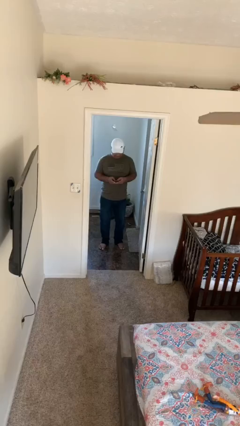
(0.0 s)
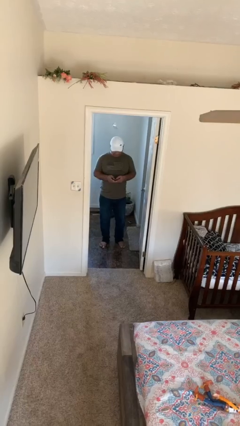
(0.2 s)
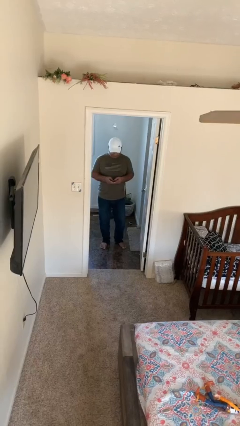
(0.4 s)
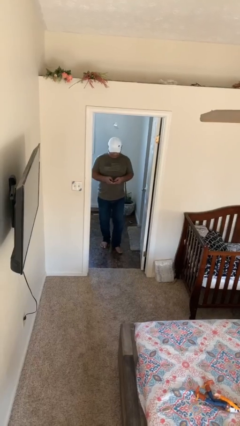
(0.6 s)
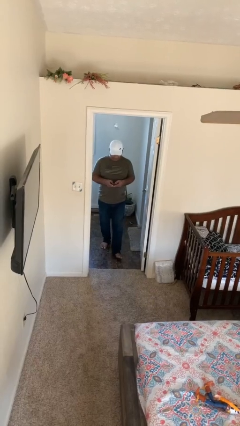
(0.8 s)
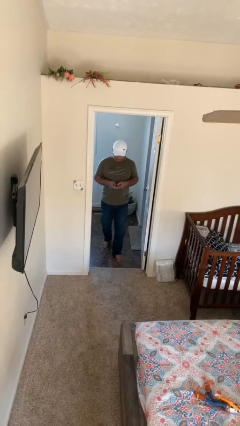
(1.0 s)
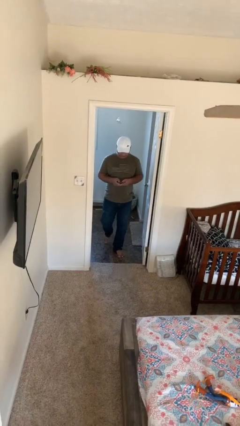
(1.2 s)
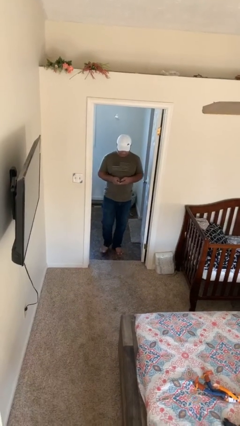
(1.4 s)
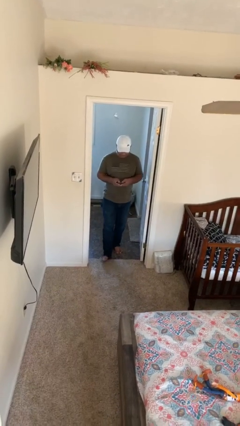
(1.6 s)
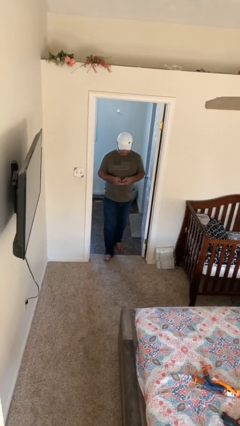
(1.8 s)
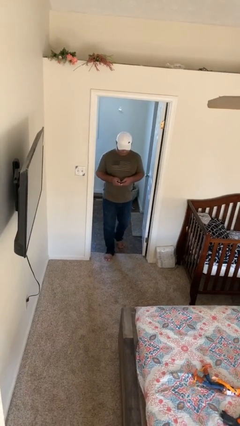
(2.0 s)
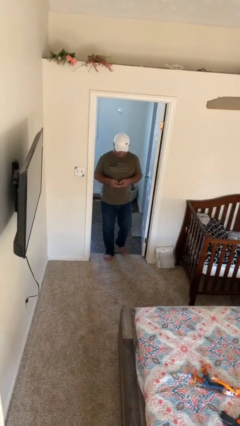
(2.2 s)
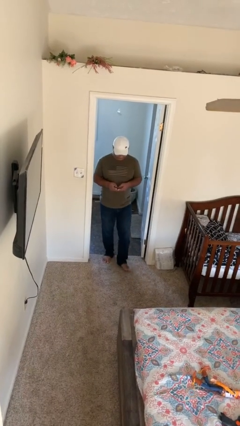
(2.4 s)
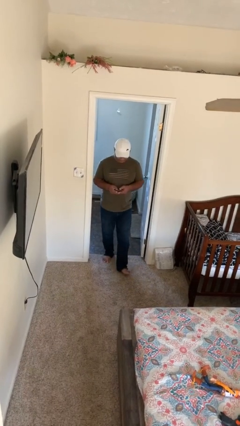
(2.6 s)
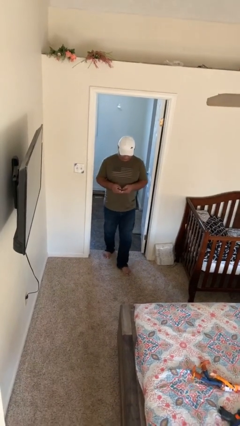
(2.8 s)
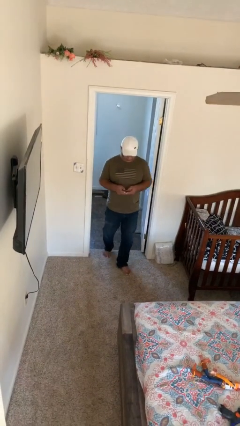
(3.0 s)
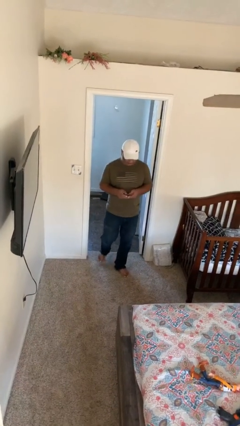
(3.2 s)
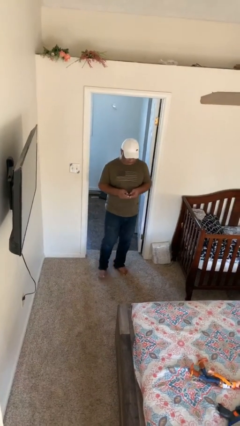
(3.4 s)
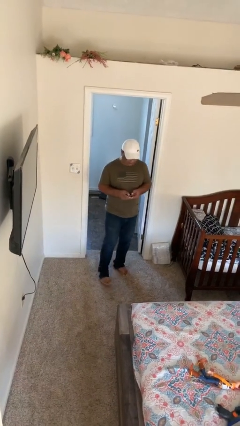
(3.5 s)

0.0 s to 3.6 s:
person enters scene through structure

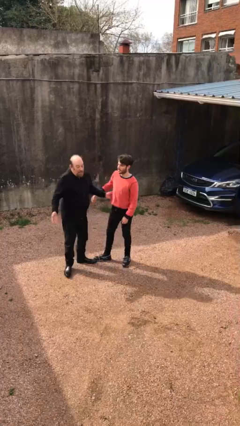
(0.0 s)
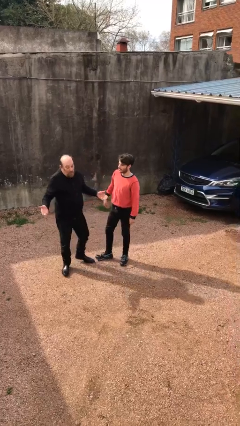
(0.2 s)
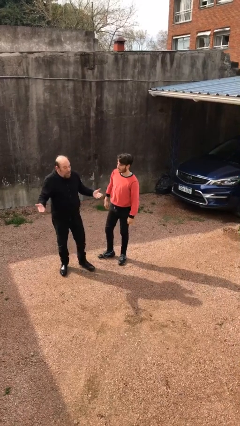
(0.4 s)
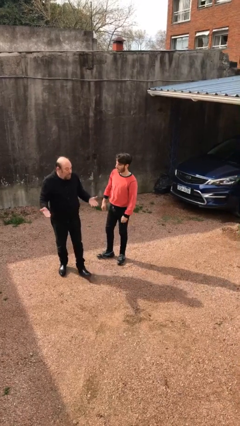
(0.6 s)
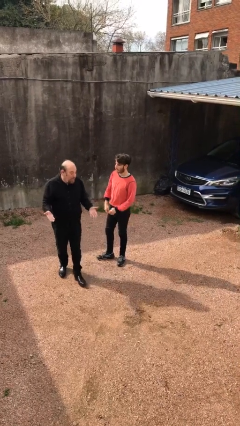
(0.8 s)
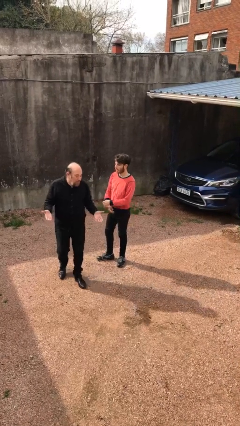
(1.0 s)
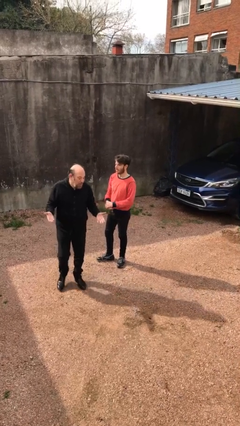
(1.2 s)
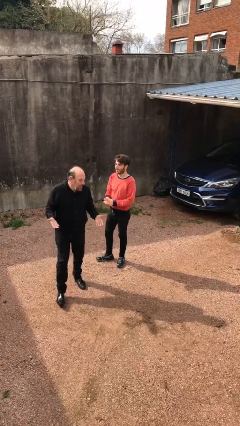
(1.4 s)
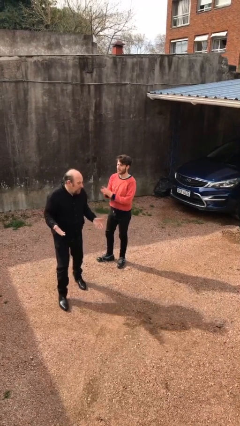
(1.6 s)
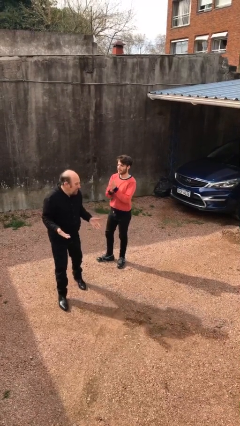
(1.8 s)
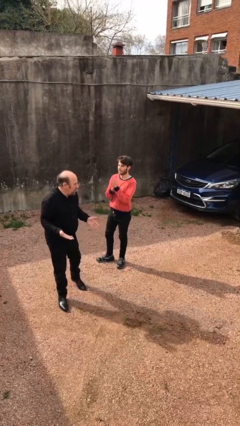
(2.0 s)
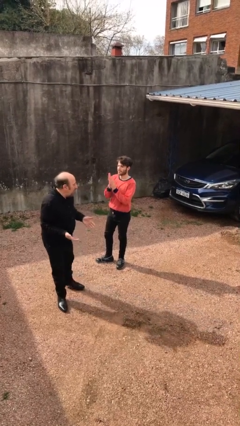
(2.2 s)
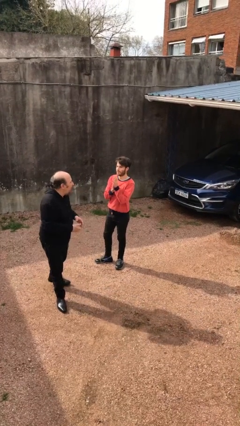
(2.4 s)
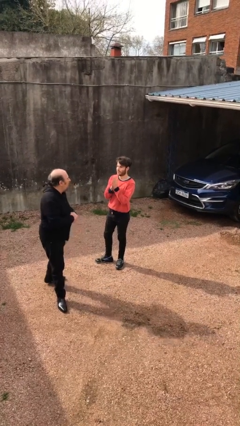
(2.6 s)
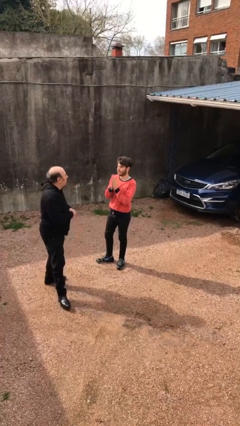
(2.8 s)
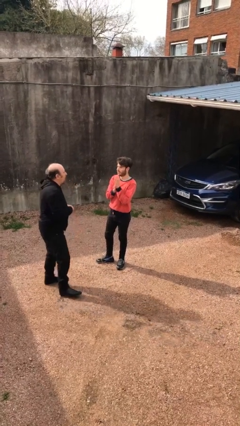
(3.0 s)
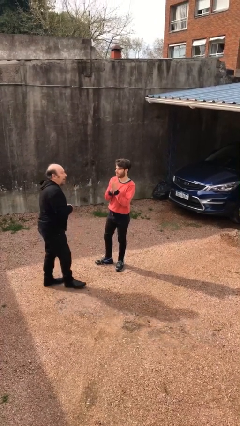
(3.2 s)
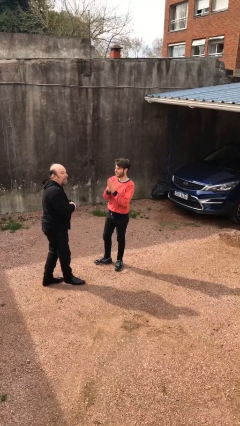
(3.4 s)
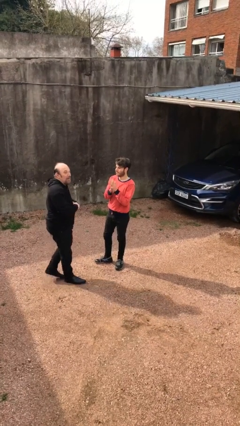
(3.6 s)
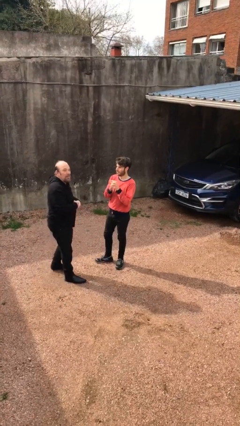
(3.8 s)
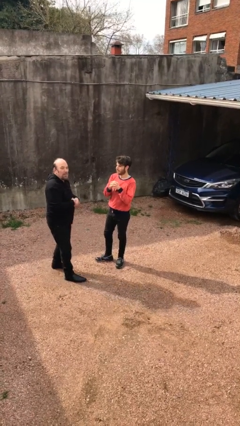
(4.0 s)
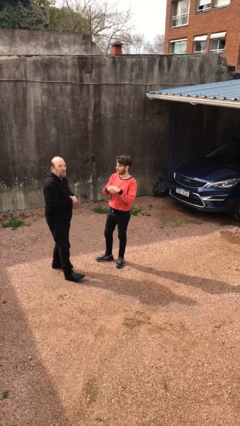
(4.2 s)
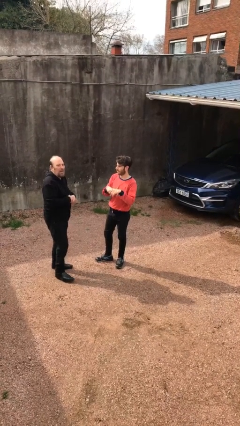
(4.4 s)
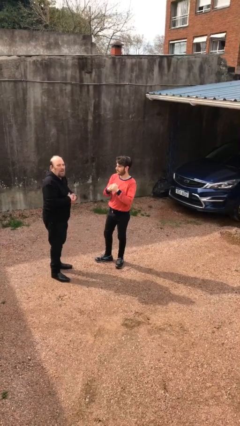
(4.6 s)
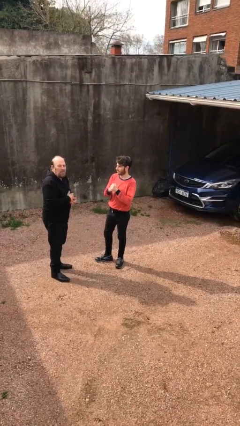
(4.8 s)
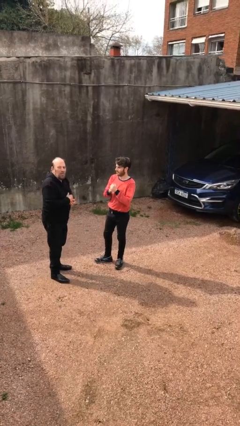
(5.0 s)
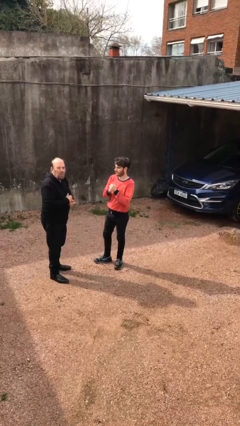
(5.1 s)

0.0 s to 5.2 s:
person talks to person

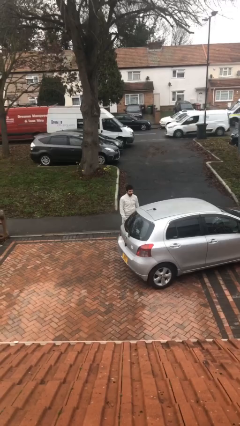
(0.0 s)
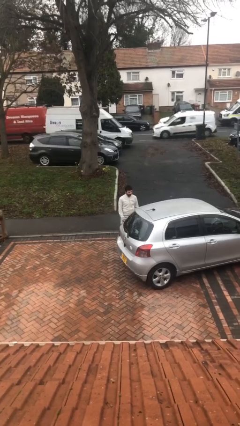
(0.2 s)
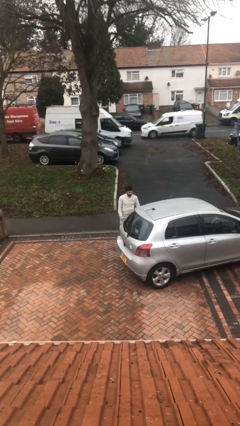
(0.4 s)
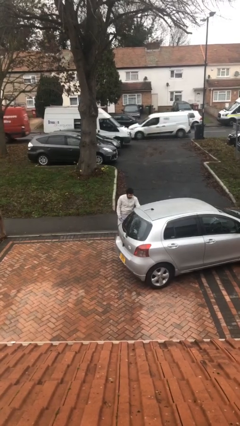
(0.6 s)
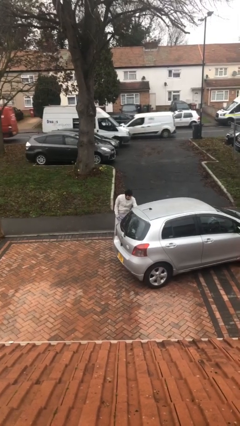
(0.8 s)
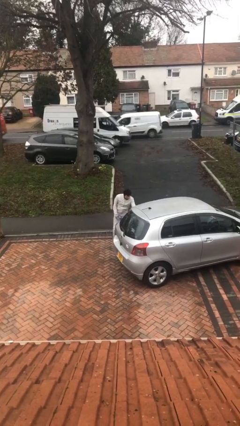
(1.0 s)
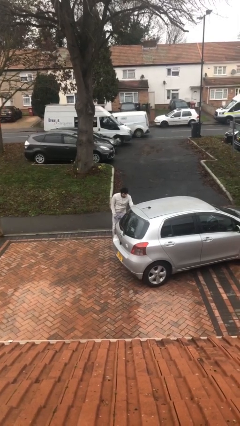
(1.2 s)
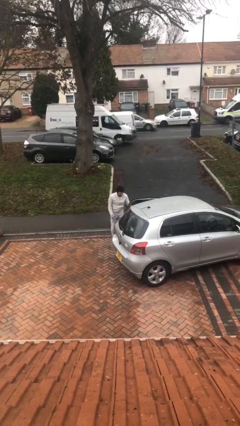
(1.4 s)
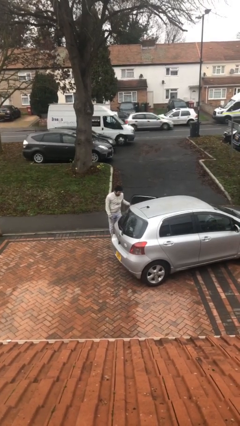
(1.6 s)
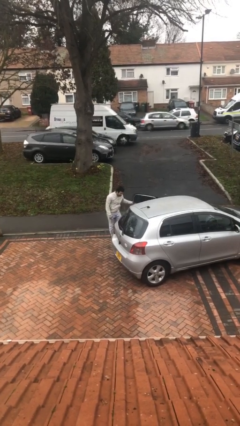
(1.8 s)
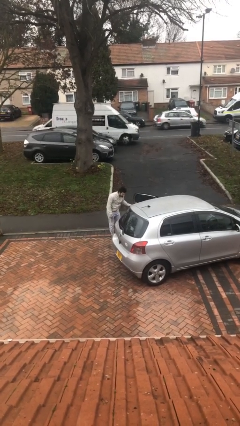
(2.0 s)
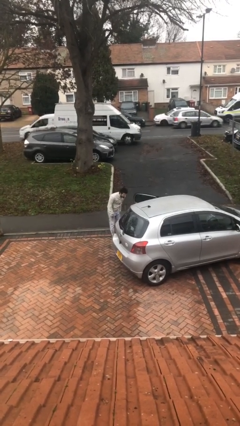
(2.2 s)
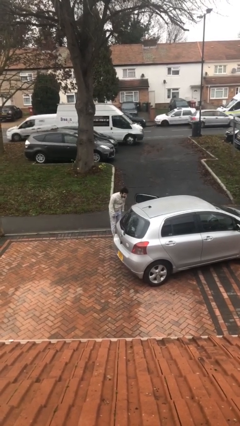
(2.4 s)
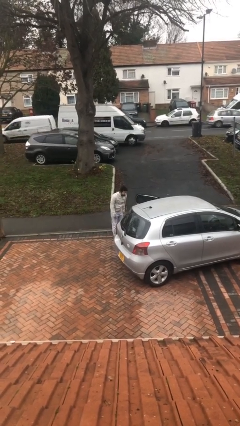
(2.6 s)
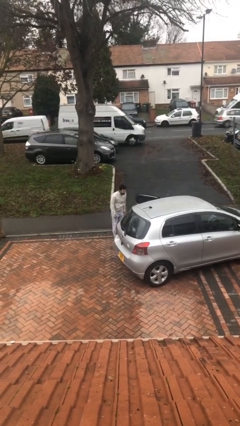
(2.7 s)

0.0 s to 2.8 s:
person opens car door

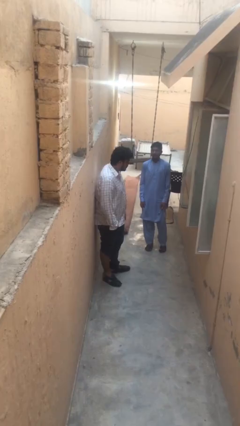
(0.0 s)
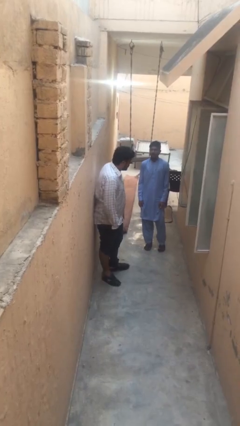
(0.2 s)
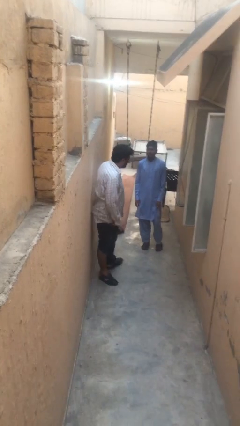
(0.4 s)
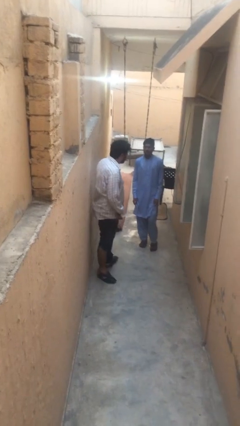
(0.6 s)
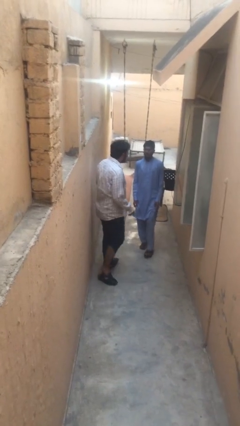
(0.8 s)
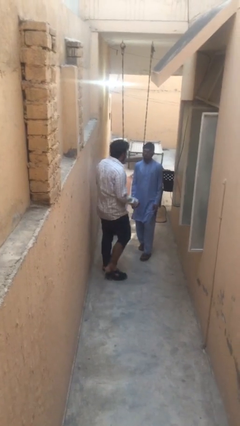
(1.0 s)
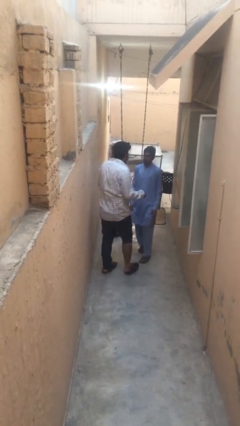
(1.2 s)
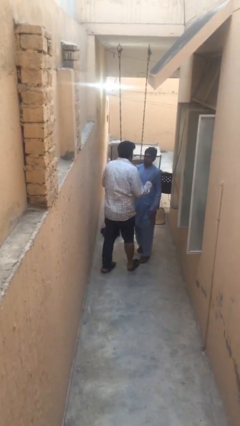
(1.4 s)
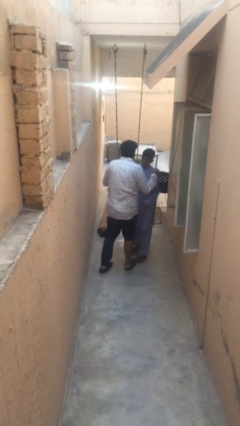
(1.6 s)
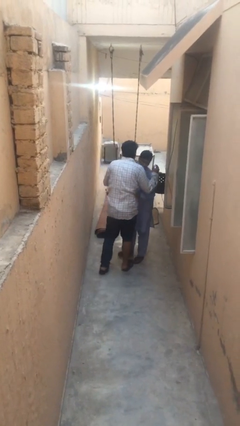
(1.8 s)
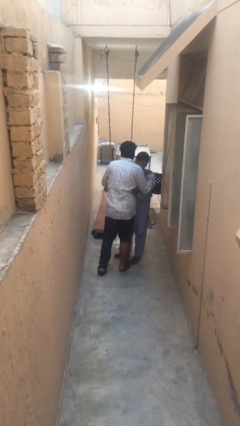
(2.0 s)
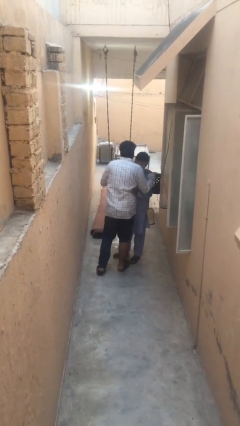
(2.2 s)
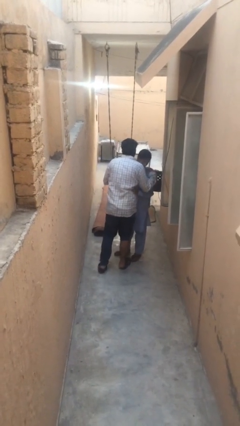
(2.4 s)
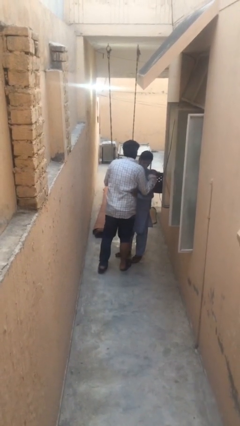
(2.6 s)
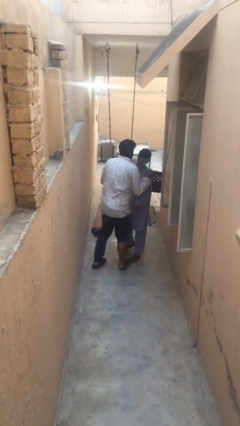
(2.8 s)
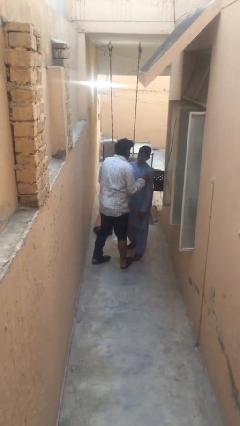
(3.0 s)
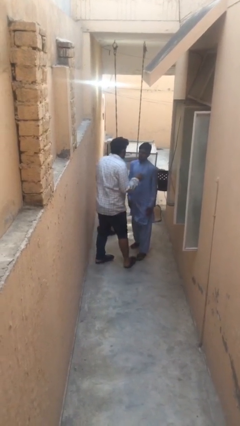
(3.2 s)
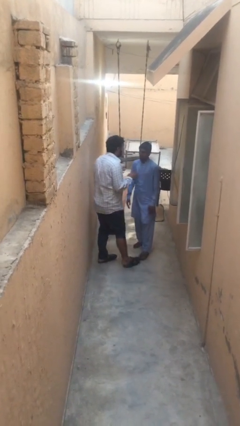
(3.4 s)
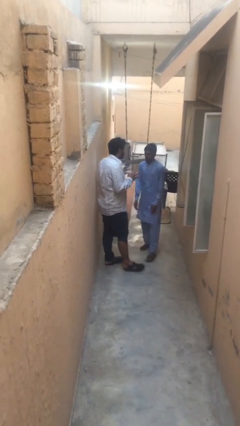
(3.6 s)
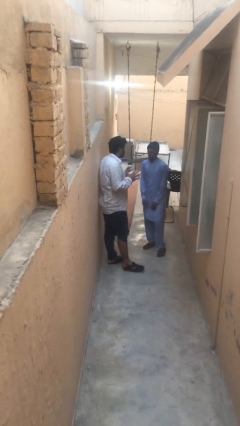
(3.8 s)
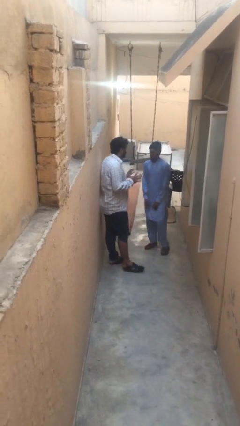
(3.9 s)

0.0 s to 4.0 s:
person embraces person

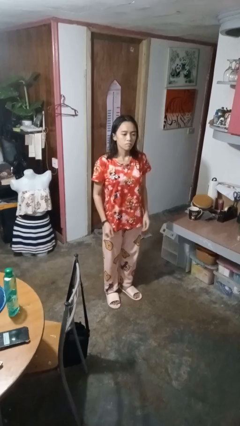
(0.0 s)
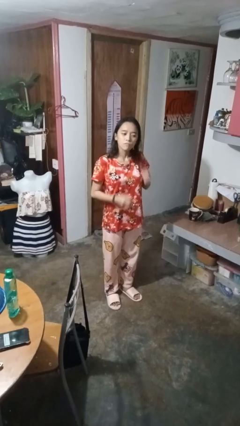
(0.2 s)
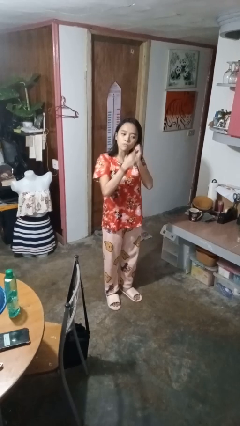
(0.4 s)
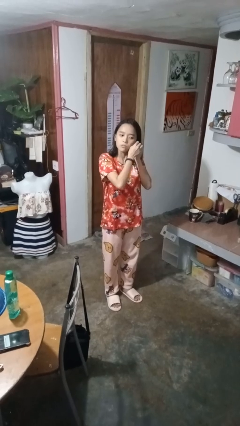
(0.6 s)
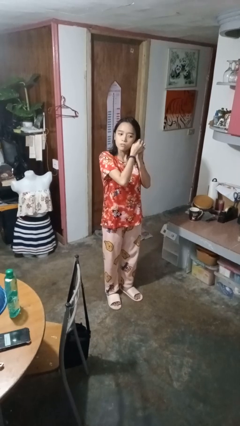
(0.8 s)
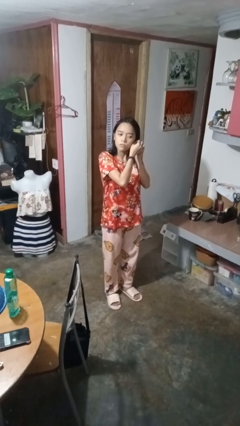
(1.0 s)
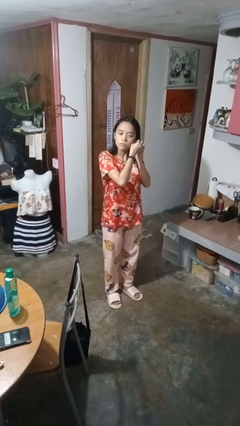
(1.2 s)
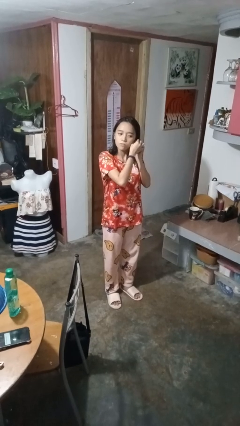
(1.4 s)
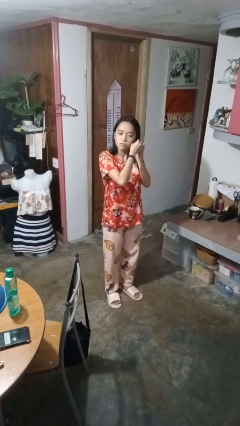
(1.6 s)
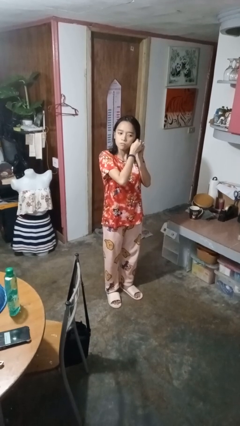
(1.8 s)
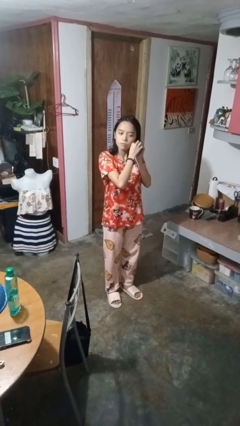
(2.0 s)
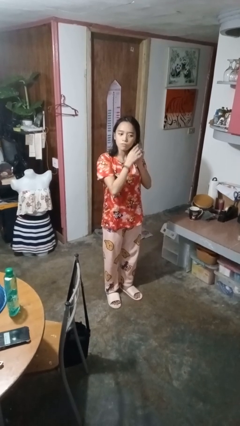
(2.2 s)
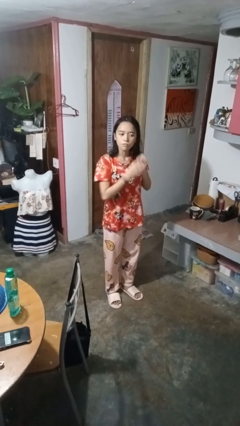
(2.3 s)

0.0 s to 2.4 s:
person puts on earrings
